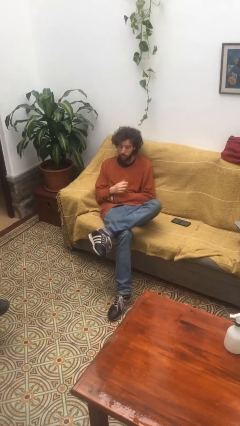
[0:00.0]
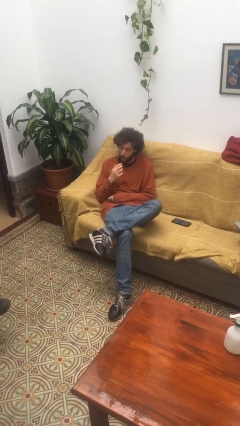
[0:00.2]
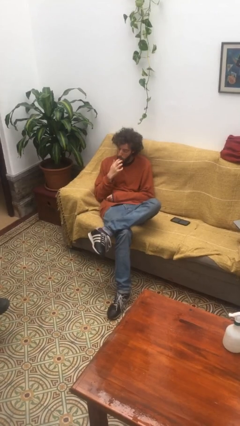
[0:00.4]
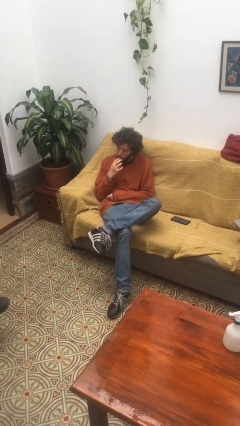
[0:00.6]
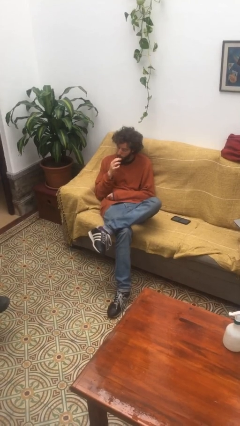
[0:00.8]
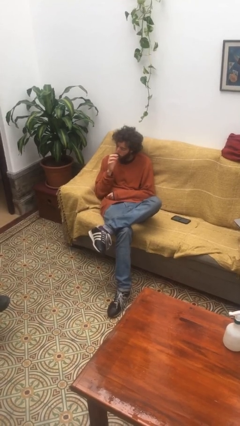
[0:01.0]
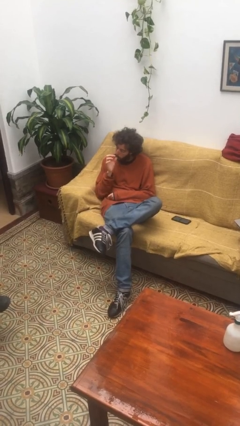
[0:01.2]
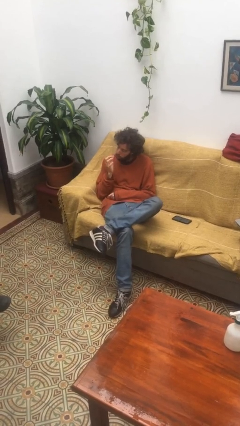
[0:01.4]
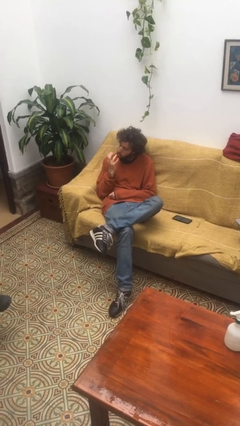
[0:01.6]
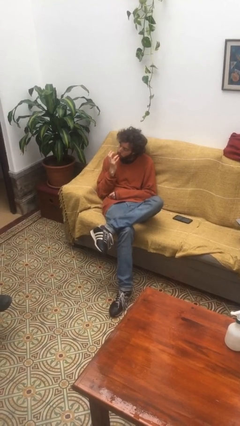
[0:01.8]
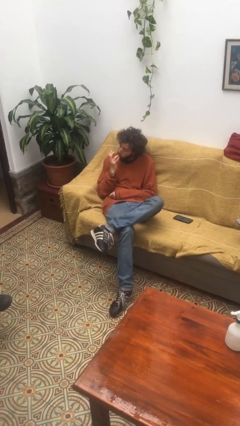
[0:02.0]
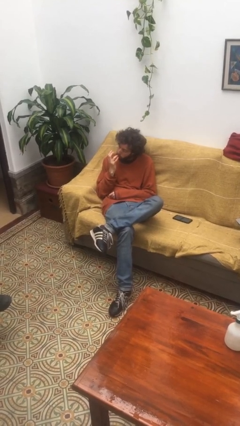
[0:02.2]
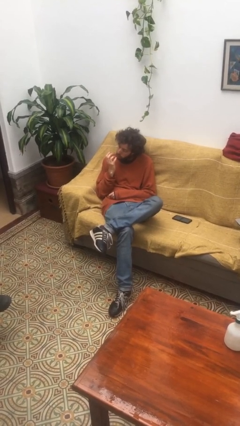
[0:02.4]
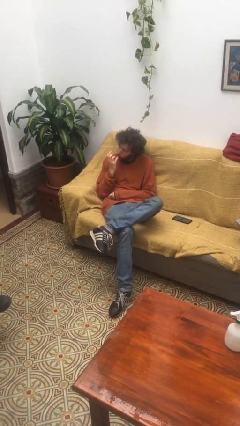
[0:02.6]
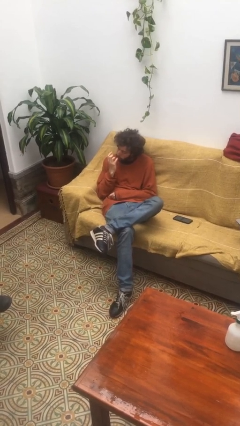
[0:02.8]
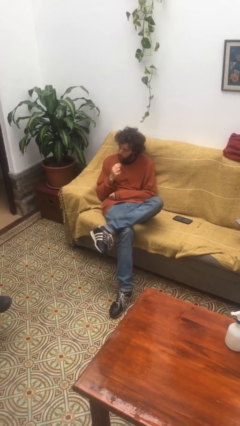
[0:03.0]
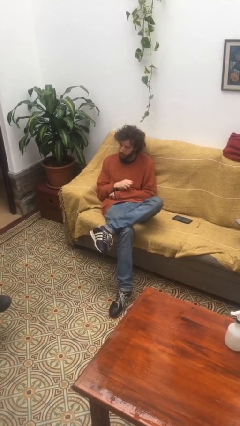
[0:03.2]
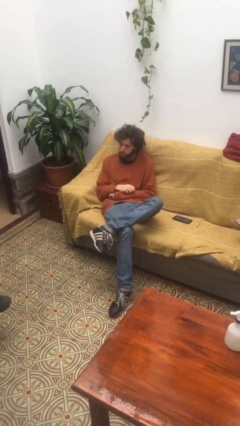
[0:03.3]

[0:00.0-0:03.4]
person licks fingers

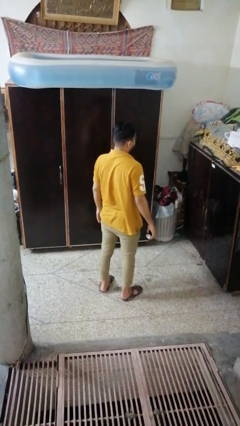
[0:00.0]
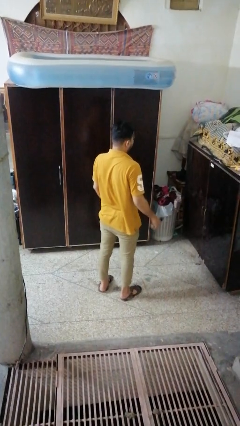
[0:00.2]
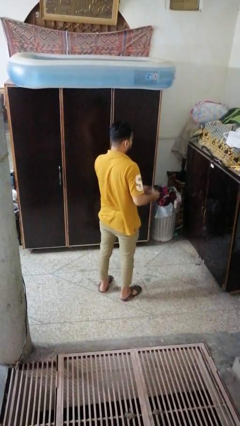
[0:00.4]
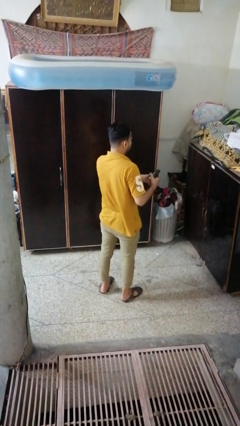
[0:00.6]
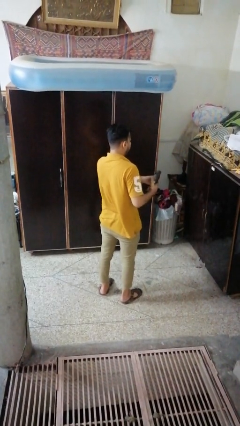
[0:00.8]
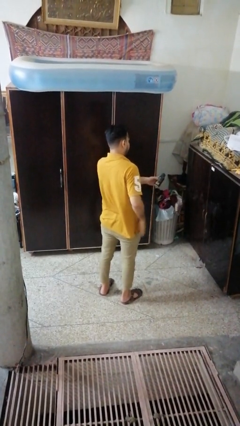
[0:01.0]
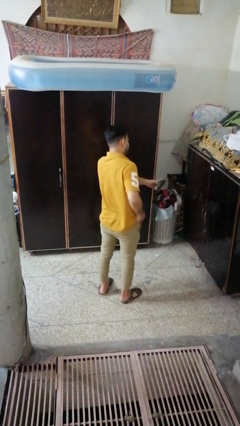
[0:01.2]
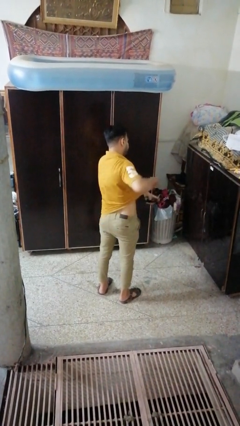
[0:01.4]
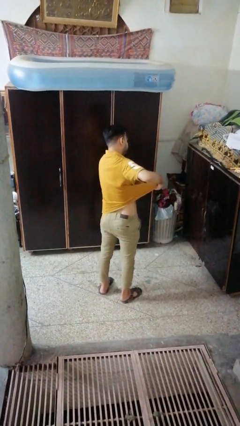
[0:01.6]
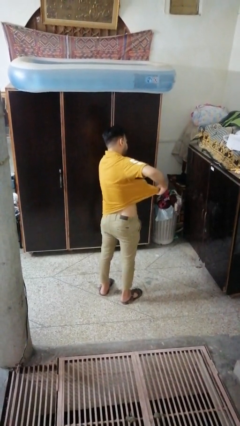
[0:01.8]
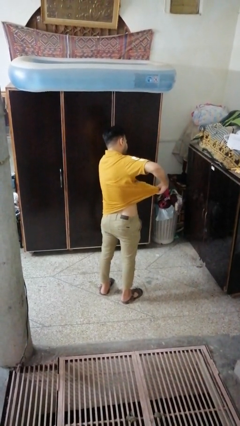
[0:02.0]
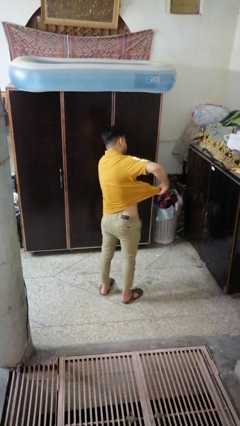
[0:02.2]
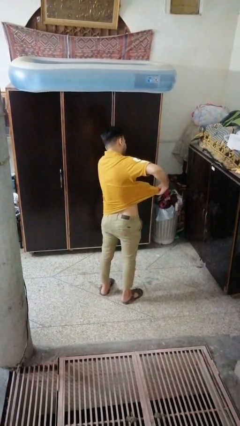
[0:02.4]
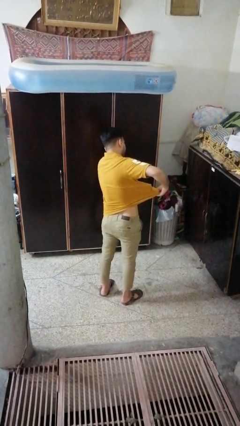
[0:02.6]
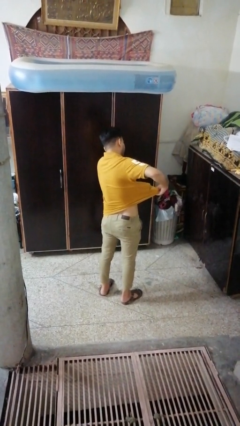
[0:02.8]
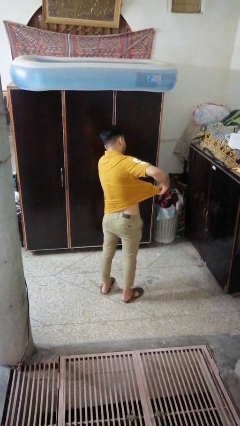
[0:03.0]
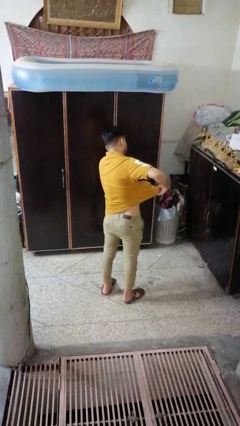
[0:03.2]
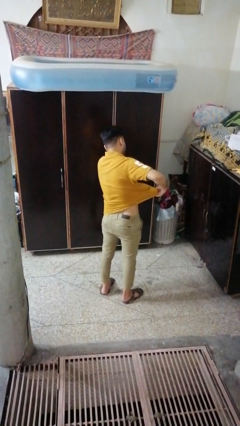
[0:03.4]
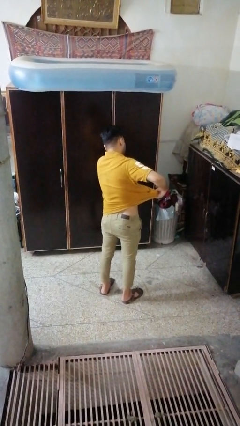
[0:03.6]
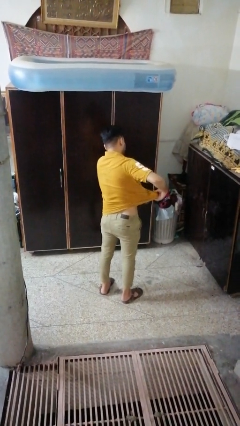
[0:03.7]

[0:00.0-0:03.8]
person applies deodorant

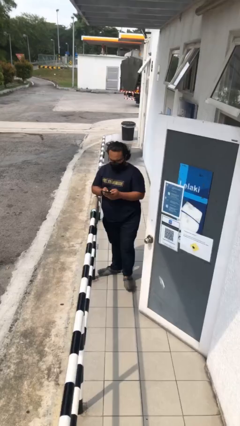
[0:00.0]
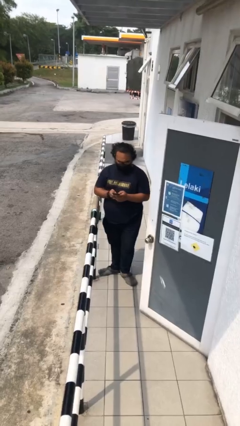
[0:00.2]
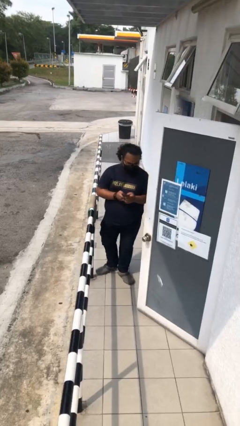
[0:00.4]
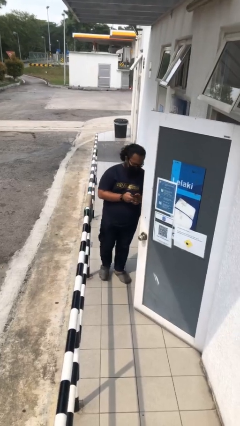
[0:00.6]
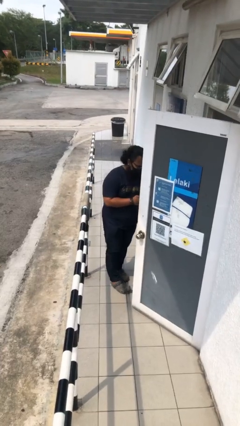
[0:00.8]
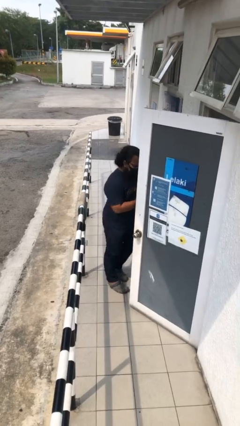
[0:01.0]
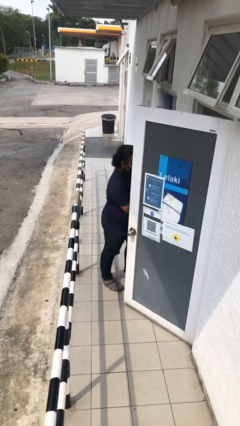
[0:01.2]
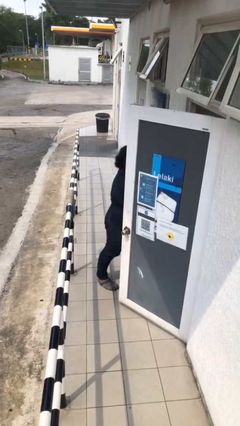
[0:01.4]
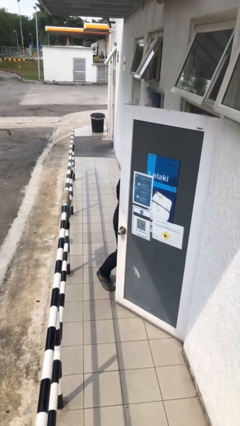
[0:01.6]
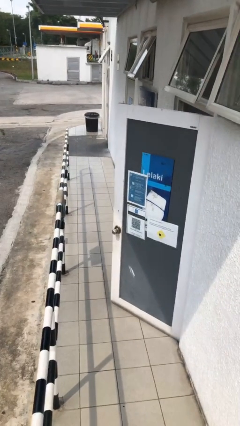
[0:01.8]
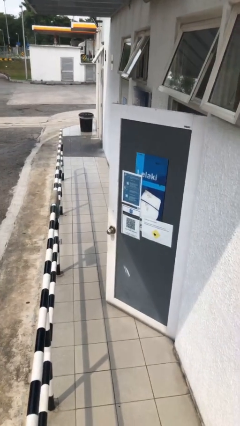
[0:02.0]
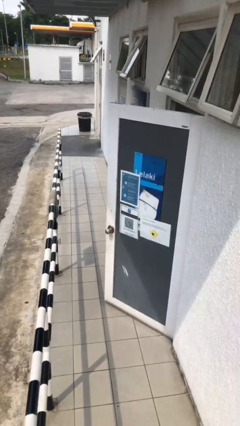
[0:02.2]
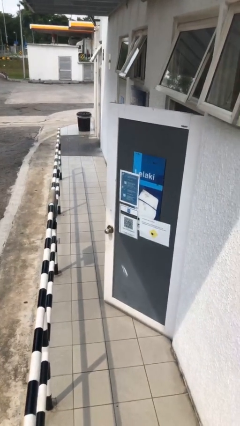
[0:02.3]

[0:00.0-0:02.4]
person exits scene through structure

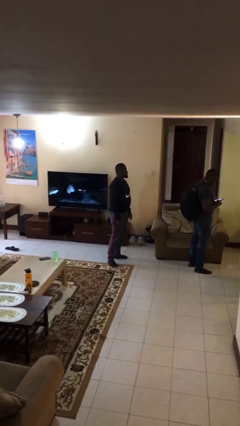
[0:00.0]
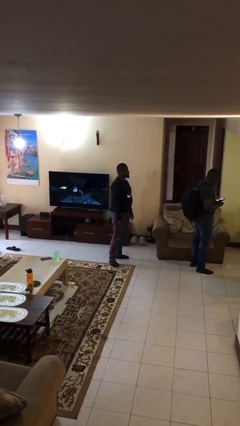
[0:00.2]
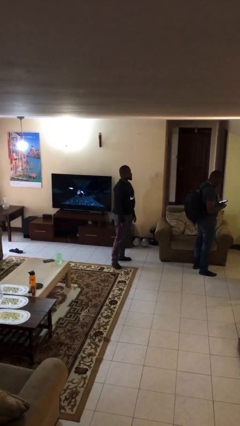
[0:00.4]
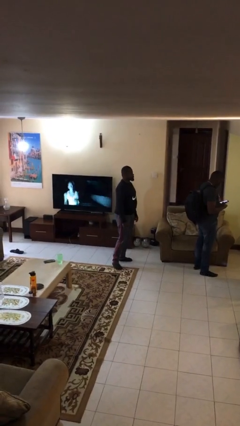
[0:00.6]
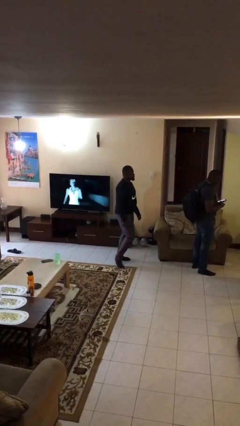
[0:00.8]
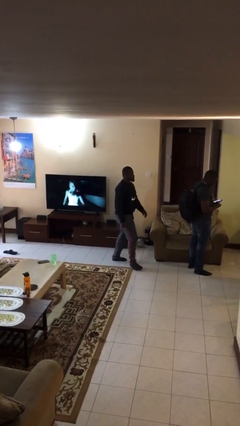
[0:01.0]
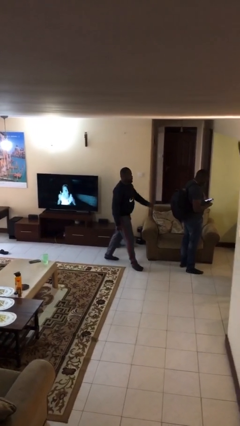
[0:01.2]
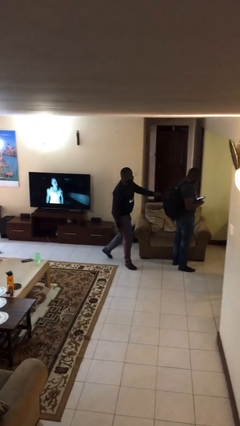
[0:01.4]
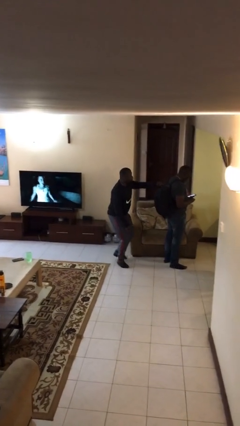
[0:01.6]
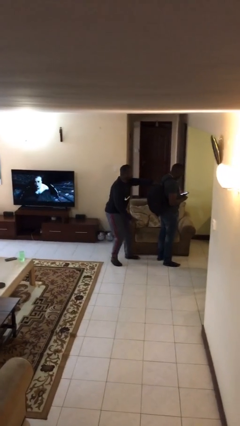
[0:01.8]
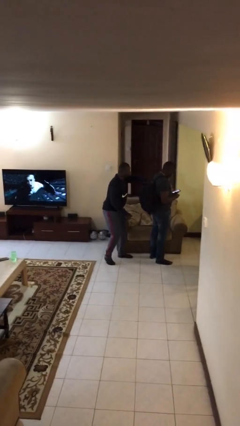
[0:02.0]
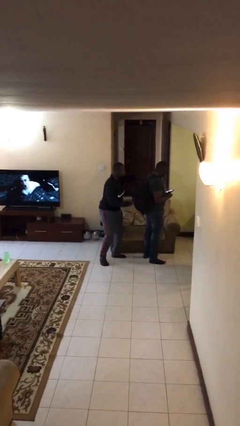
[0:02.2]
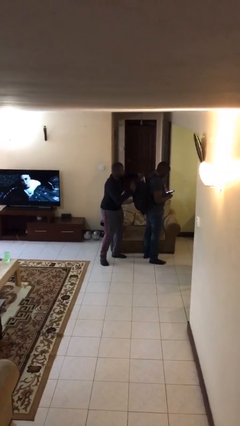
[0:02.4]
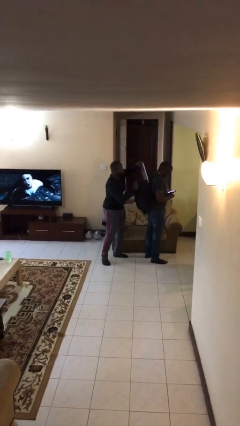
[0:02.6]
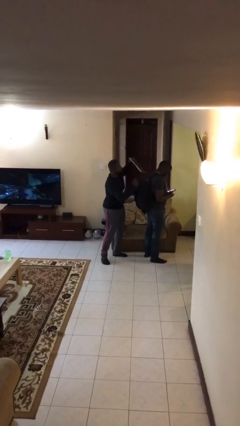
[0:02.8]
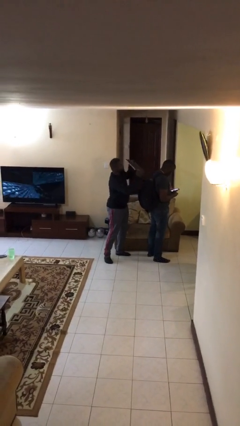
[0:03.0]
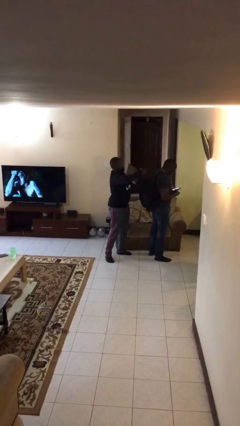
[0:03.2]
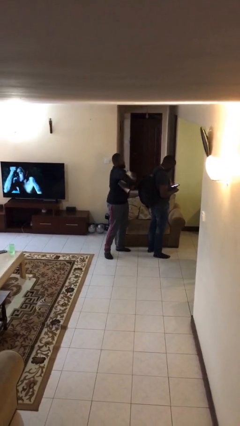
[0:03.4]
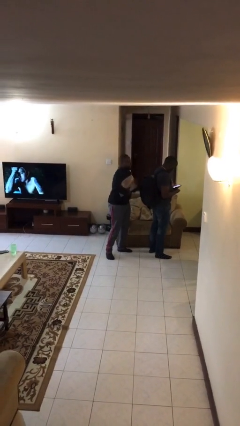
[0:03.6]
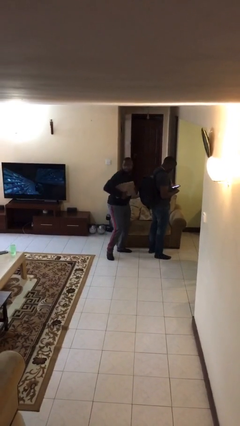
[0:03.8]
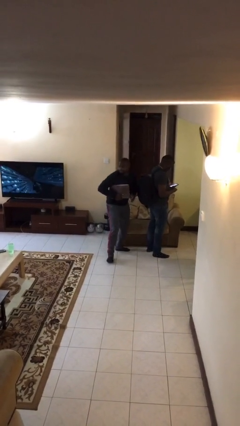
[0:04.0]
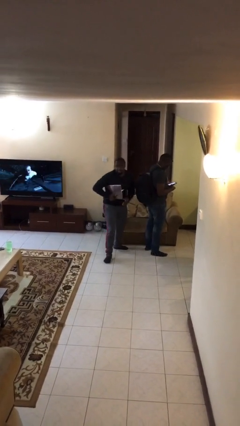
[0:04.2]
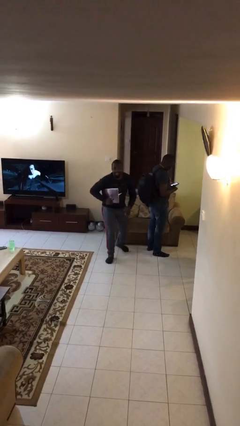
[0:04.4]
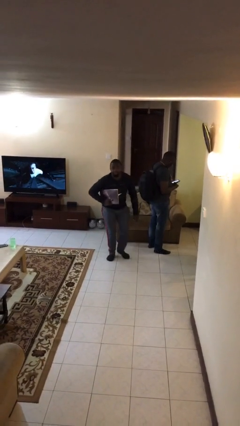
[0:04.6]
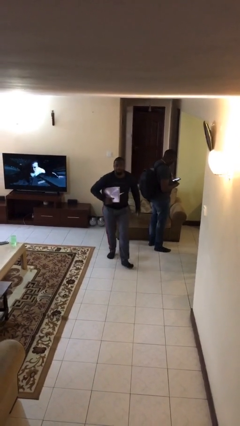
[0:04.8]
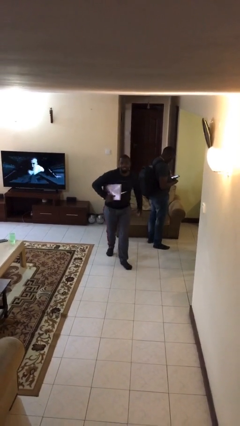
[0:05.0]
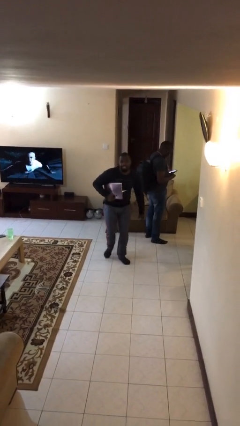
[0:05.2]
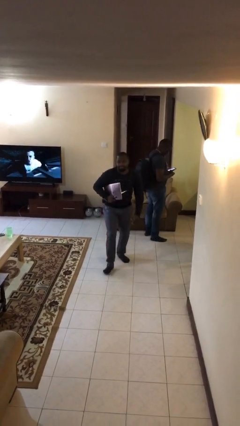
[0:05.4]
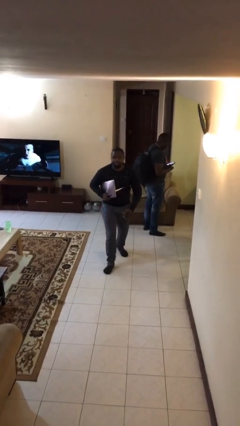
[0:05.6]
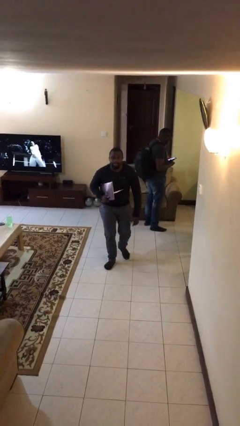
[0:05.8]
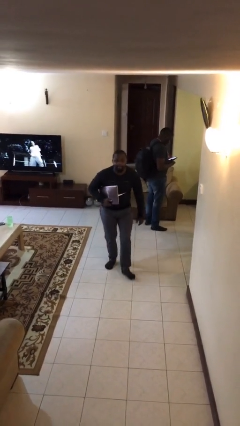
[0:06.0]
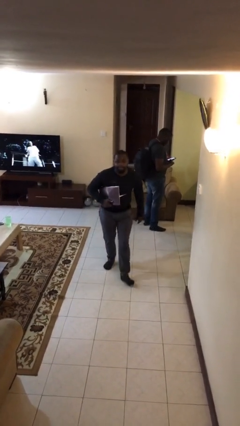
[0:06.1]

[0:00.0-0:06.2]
person steals object from person

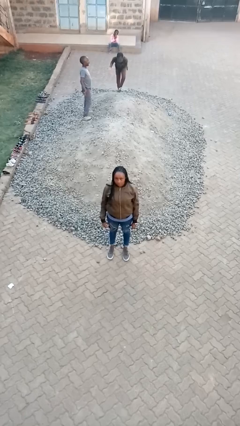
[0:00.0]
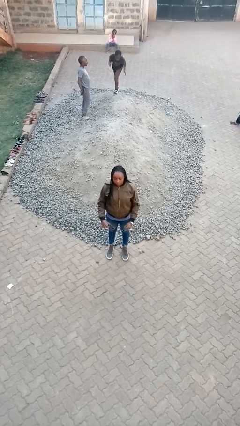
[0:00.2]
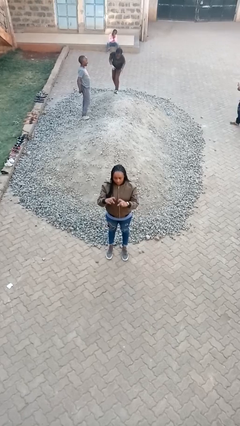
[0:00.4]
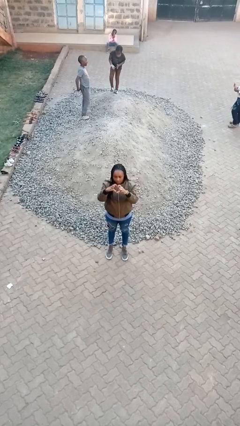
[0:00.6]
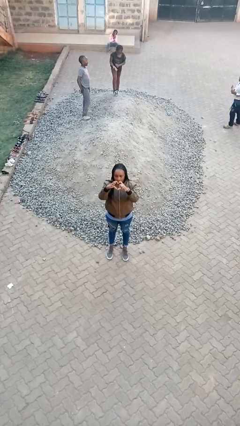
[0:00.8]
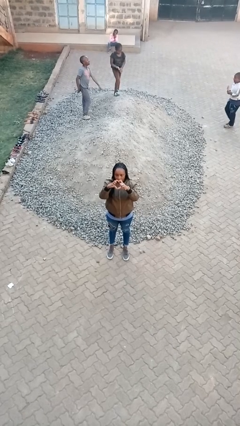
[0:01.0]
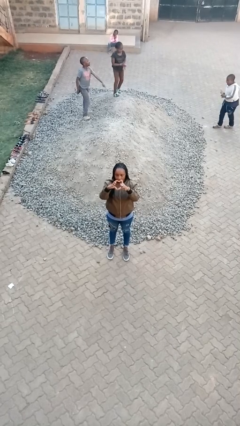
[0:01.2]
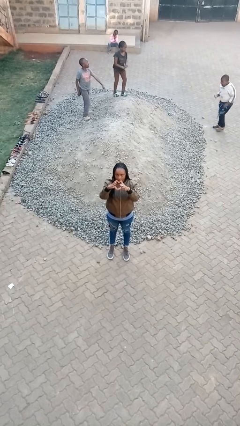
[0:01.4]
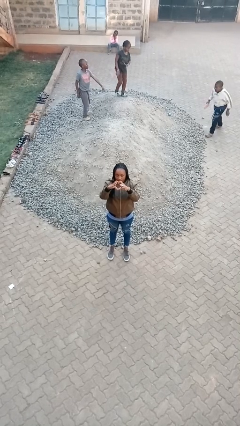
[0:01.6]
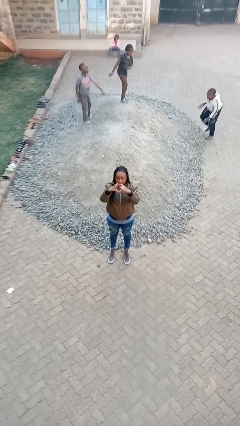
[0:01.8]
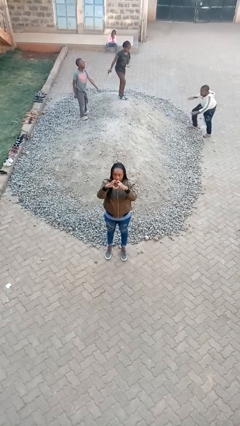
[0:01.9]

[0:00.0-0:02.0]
person gestures heart
